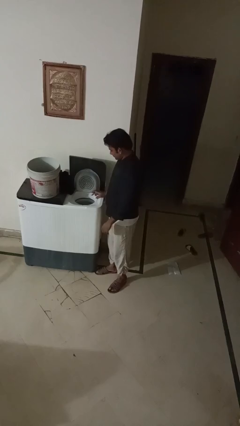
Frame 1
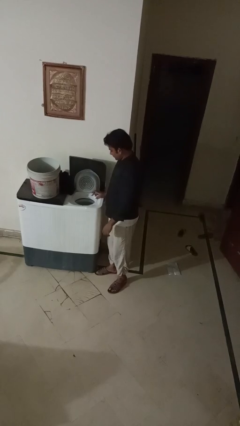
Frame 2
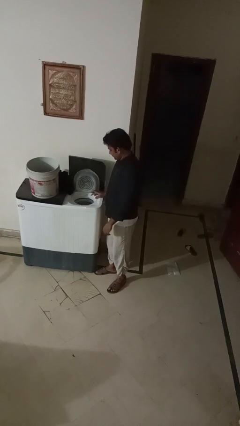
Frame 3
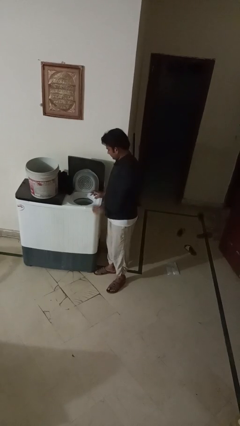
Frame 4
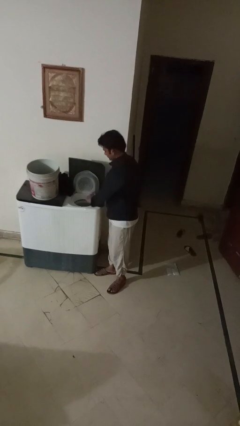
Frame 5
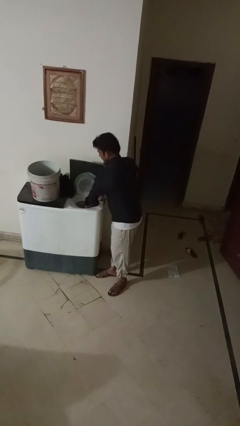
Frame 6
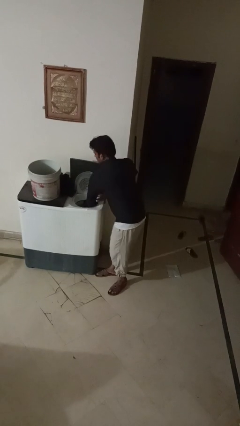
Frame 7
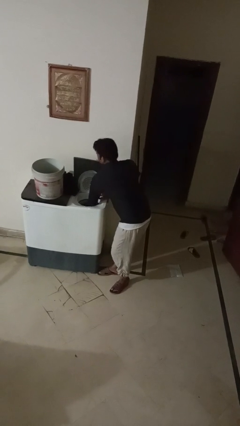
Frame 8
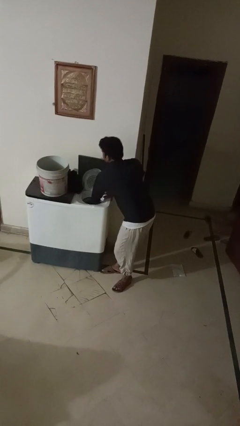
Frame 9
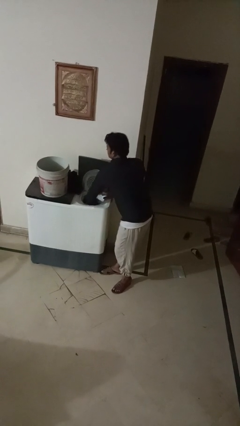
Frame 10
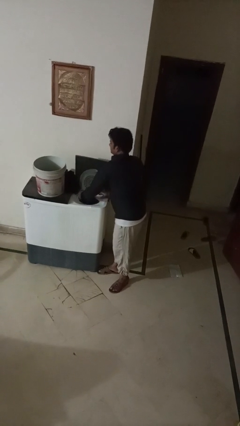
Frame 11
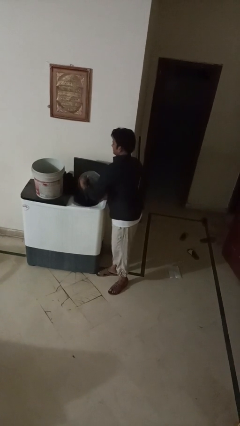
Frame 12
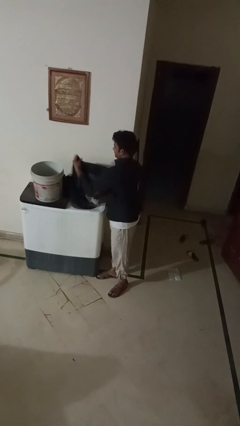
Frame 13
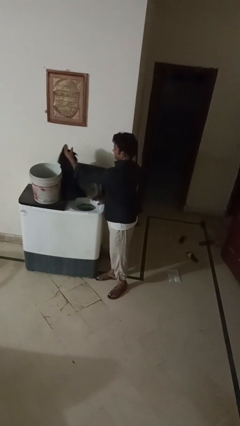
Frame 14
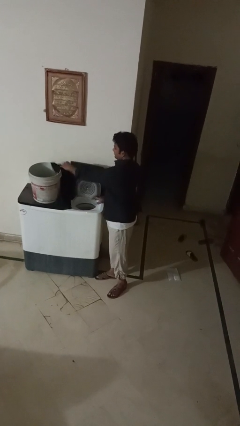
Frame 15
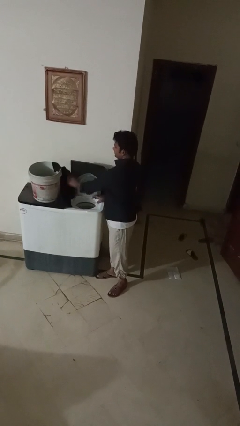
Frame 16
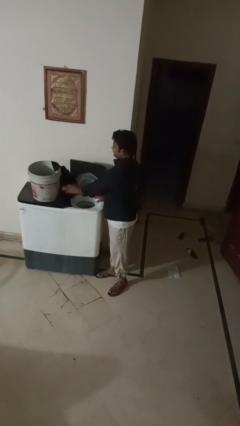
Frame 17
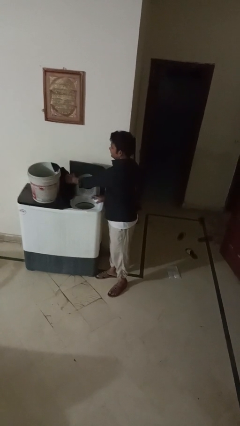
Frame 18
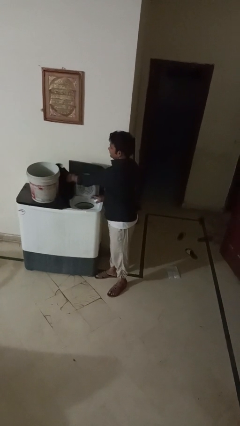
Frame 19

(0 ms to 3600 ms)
person unloads dryer

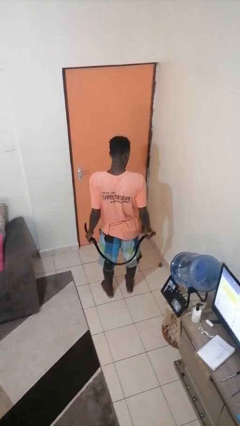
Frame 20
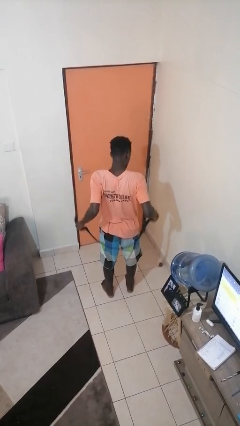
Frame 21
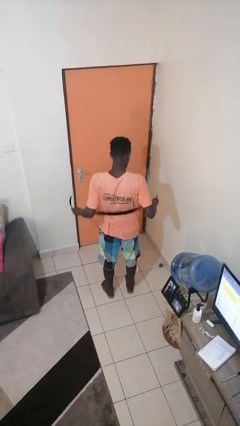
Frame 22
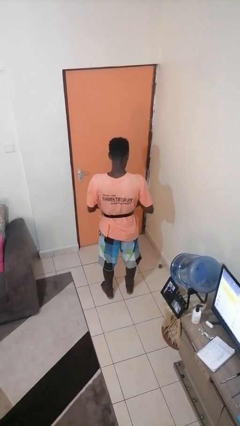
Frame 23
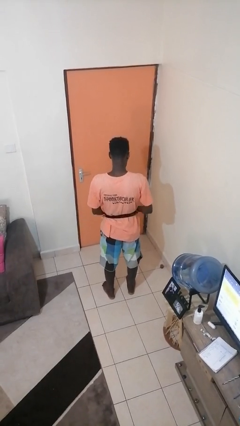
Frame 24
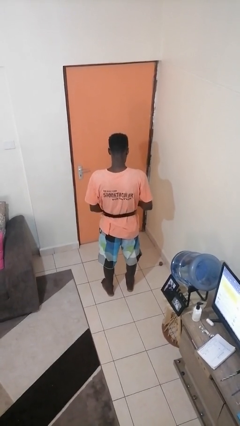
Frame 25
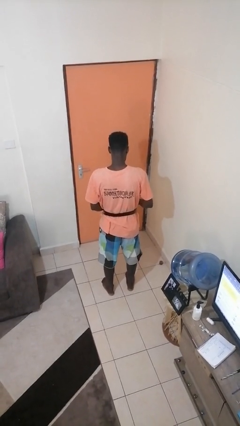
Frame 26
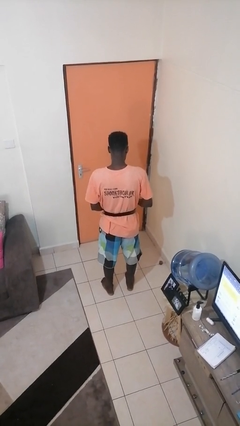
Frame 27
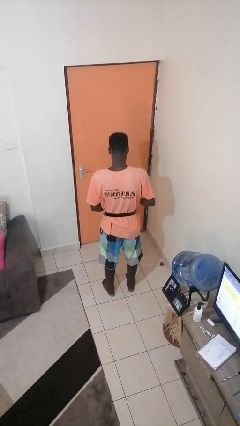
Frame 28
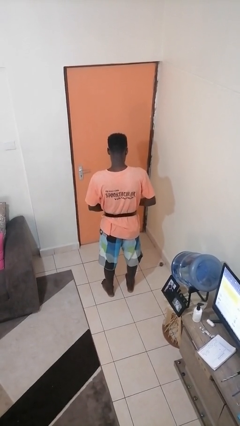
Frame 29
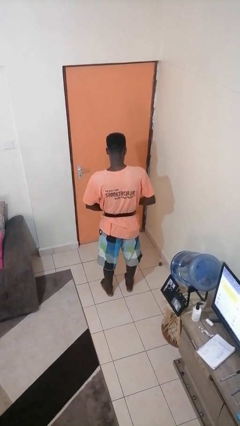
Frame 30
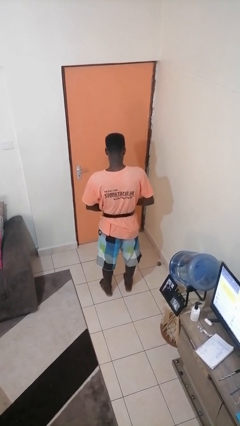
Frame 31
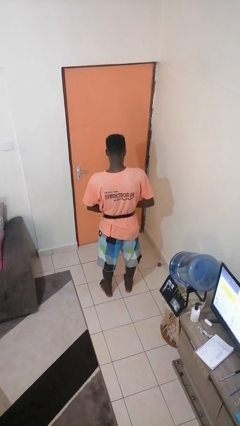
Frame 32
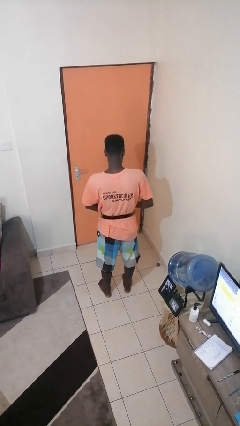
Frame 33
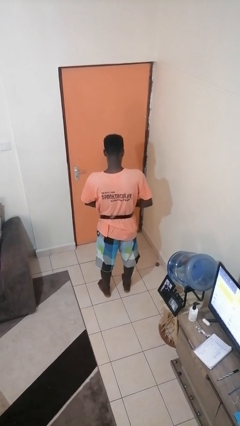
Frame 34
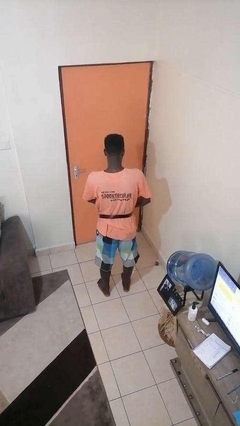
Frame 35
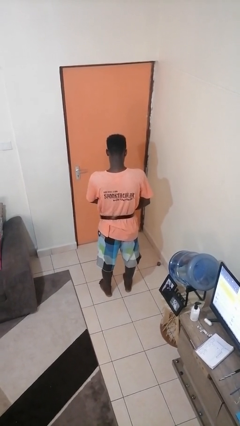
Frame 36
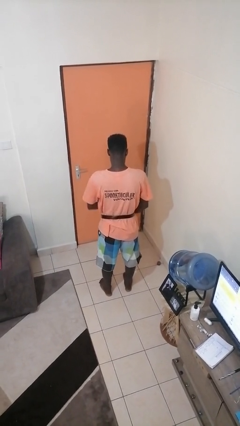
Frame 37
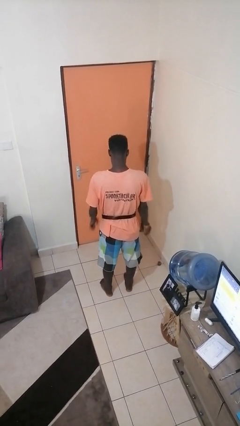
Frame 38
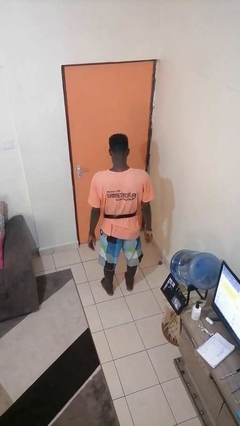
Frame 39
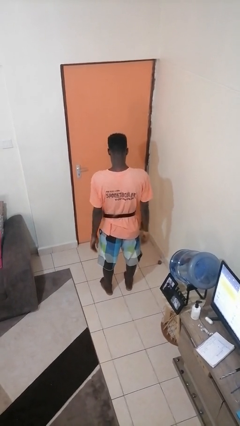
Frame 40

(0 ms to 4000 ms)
person puts on belt

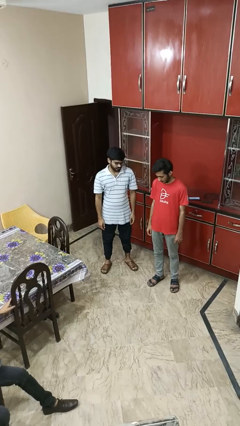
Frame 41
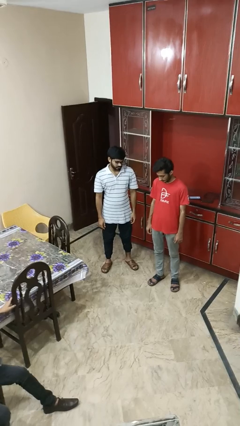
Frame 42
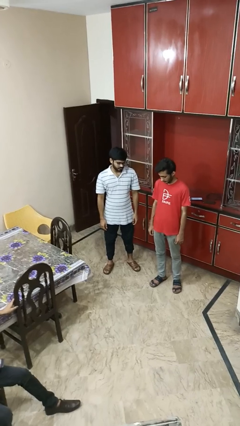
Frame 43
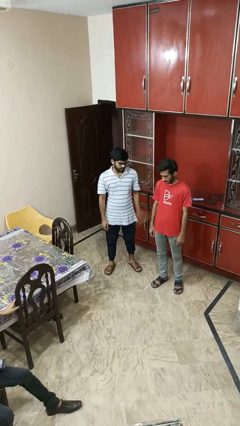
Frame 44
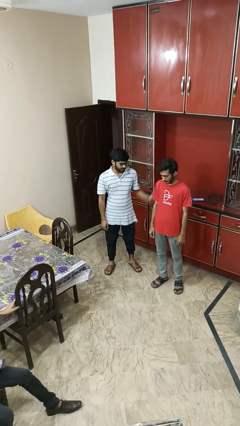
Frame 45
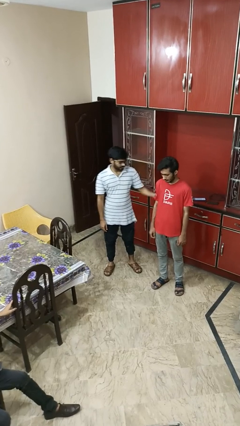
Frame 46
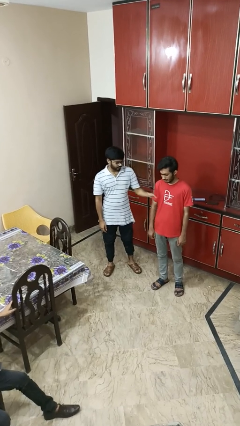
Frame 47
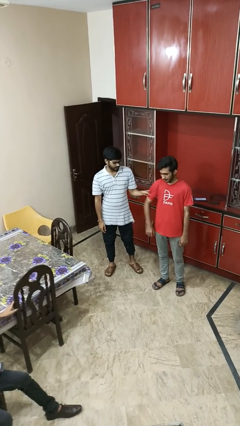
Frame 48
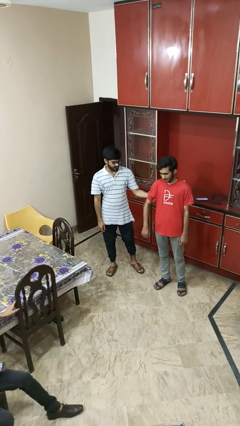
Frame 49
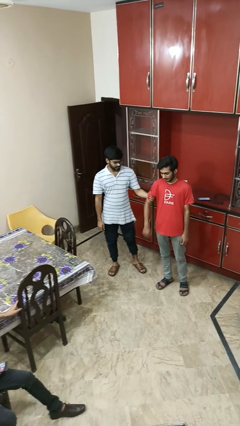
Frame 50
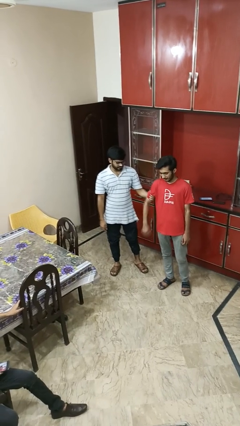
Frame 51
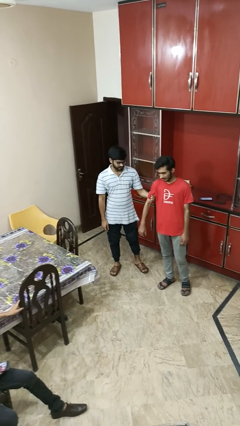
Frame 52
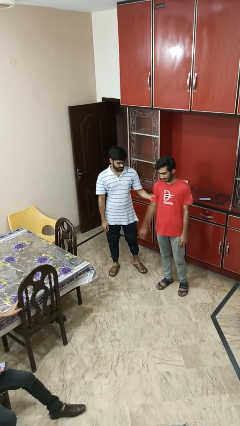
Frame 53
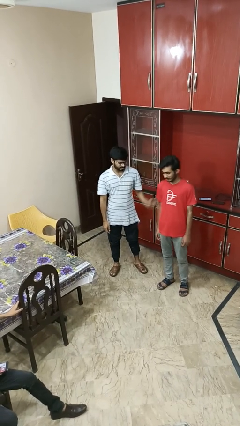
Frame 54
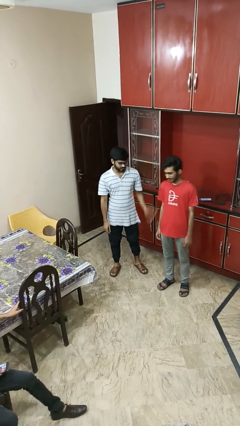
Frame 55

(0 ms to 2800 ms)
person grabs person by bicep

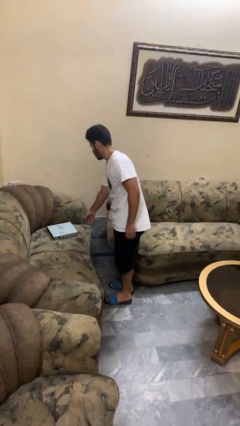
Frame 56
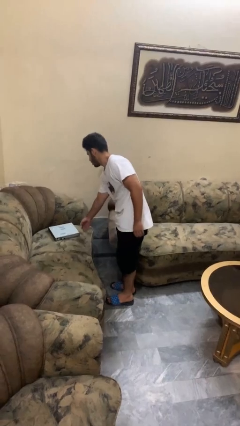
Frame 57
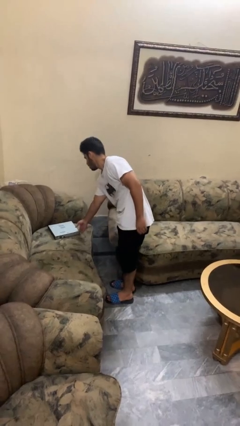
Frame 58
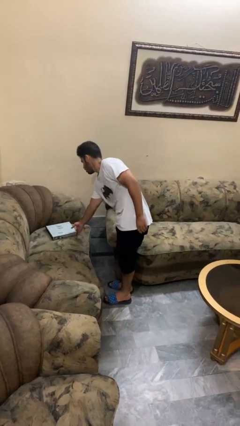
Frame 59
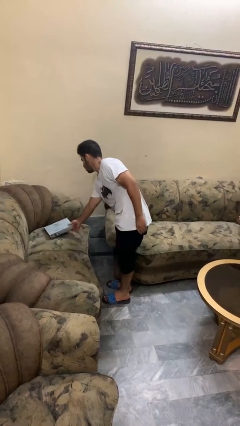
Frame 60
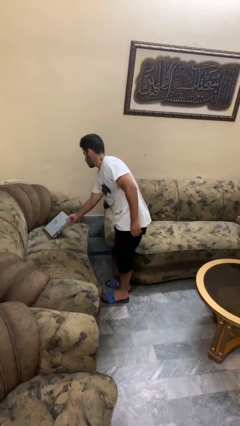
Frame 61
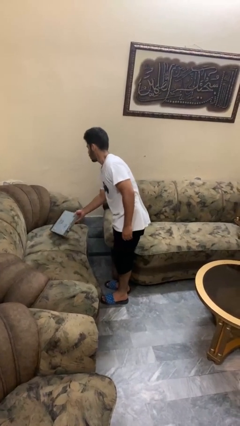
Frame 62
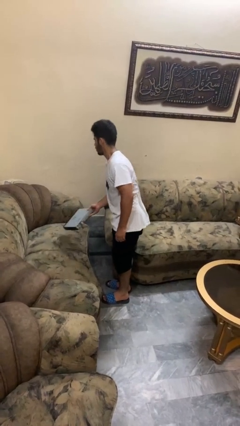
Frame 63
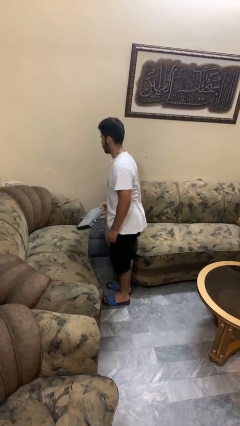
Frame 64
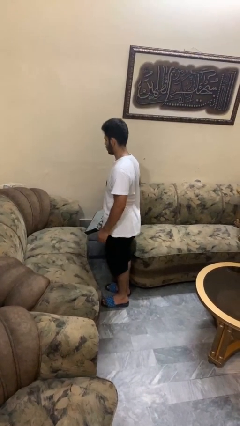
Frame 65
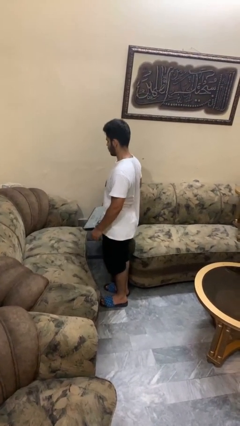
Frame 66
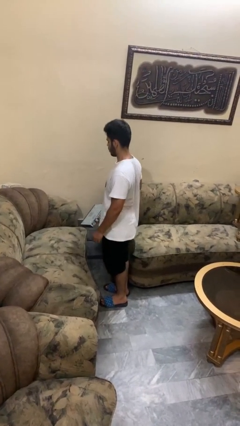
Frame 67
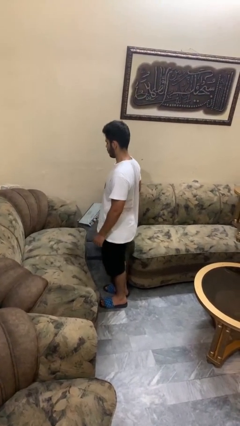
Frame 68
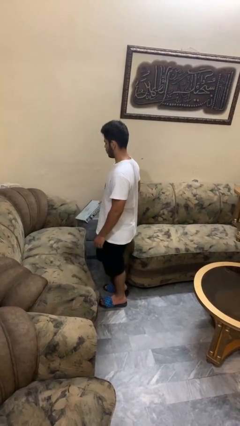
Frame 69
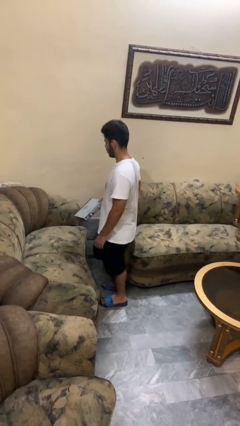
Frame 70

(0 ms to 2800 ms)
person picks up object from couch

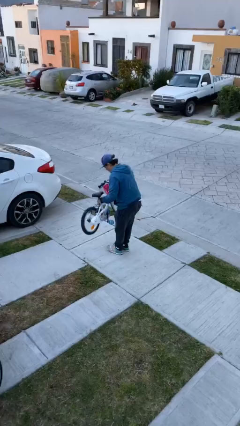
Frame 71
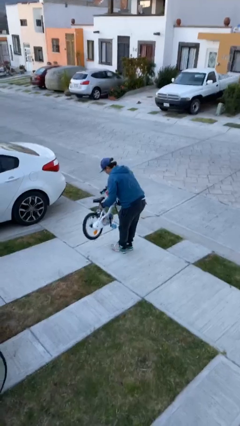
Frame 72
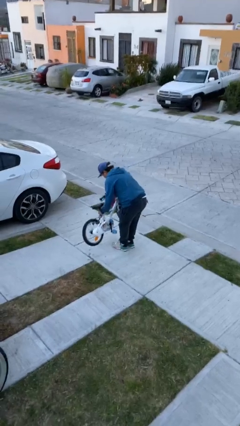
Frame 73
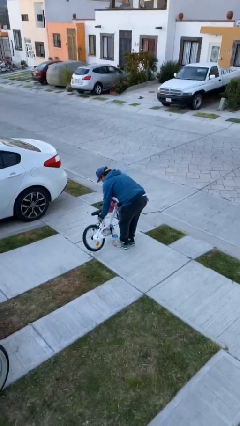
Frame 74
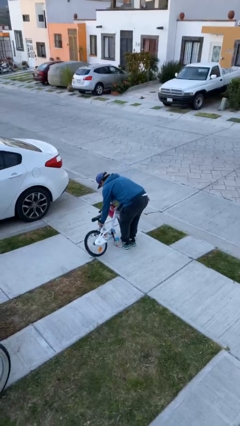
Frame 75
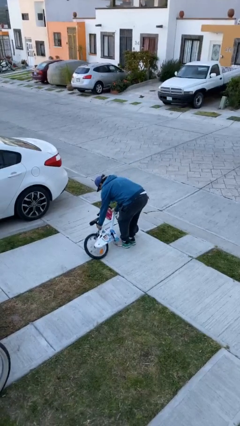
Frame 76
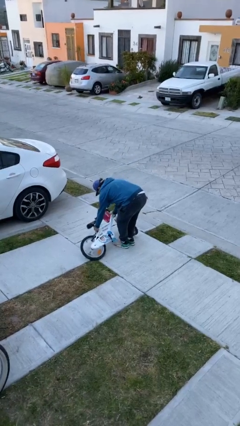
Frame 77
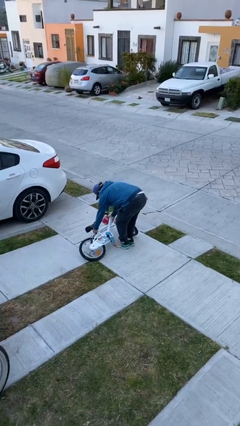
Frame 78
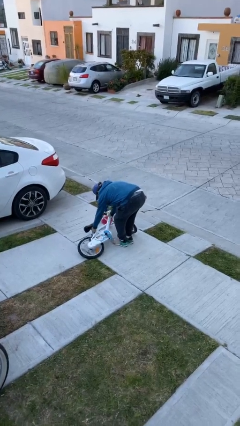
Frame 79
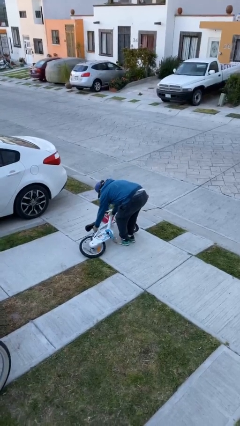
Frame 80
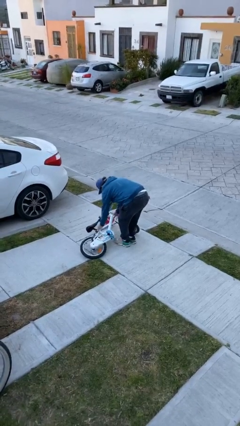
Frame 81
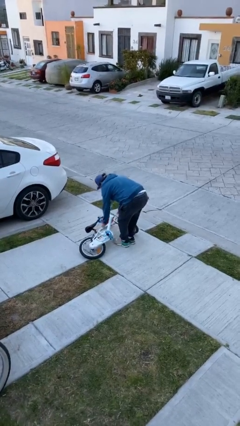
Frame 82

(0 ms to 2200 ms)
person puts down object on floor

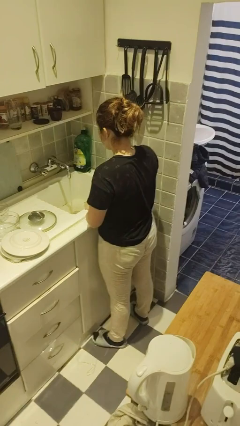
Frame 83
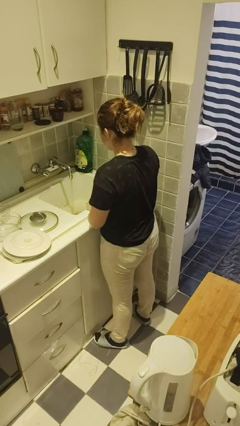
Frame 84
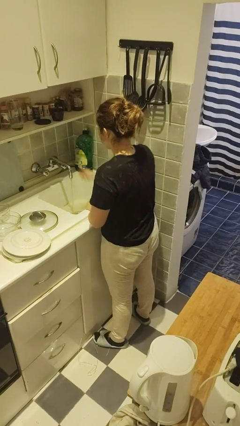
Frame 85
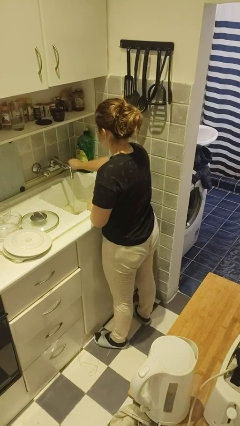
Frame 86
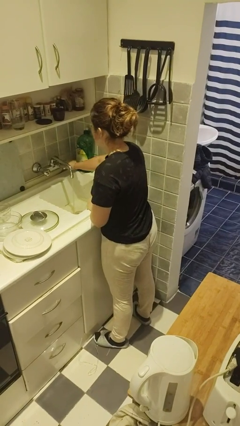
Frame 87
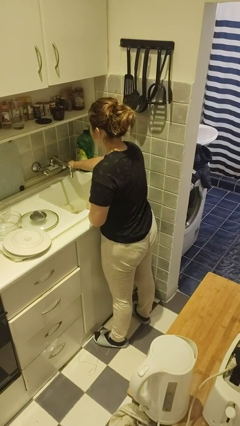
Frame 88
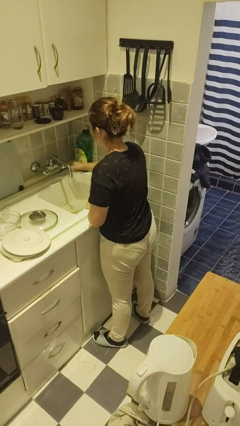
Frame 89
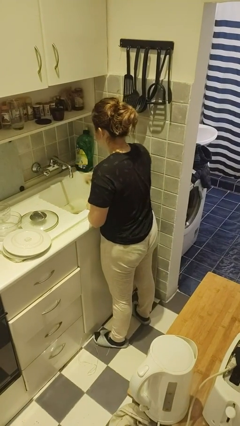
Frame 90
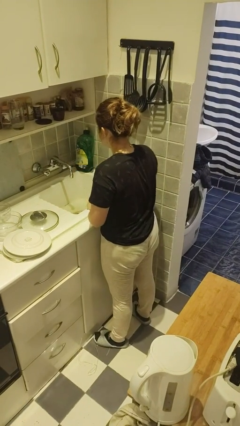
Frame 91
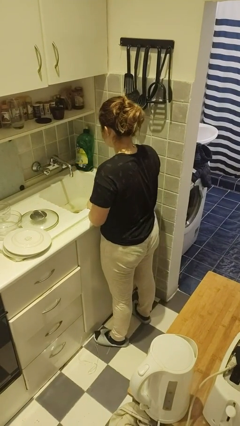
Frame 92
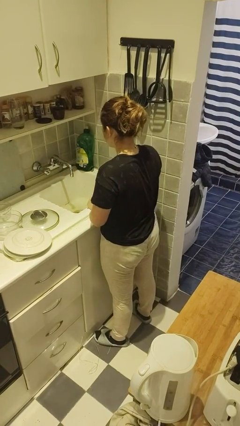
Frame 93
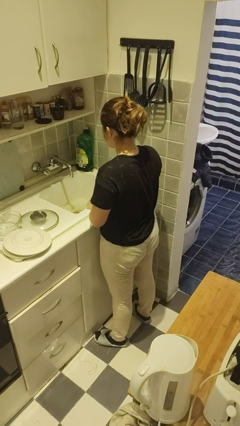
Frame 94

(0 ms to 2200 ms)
person turns off faucet
